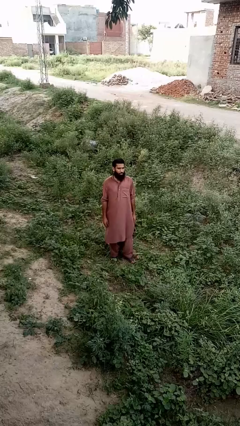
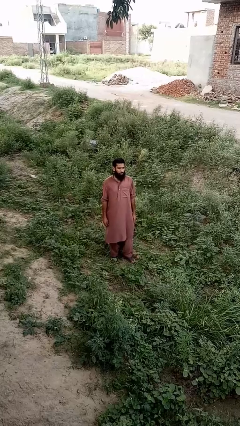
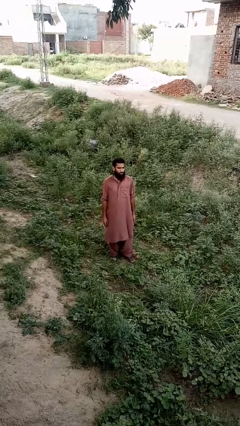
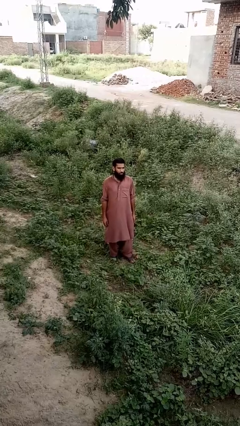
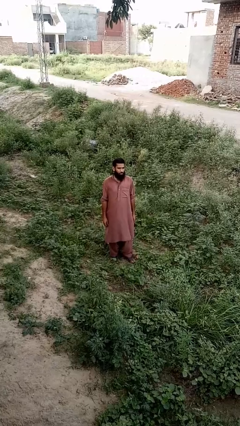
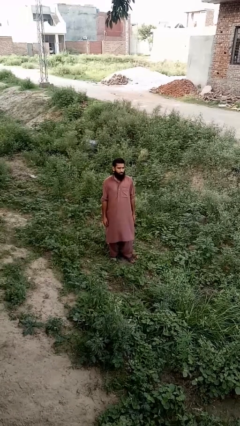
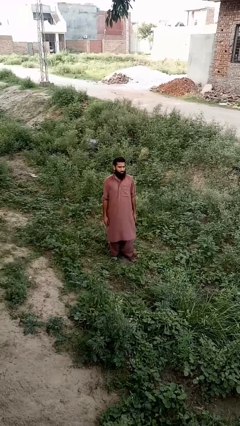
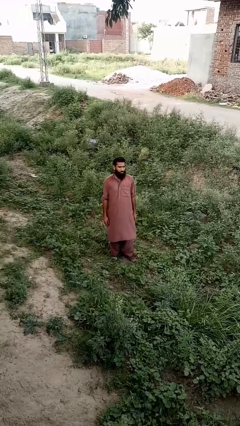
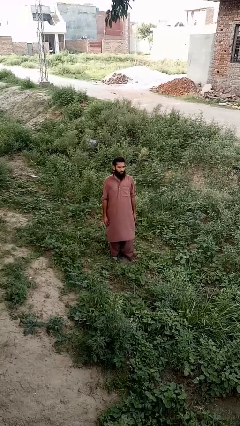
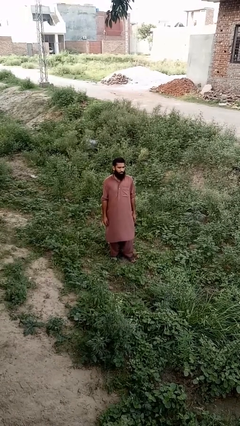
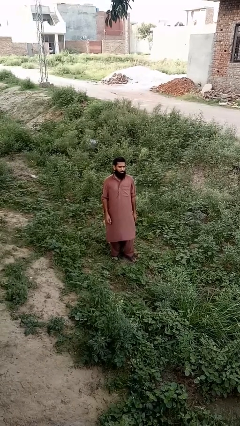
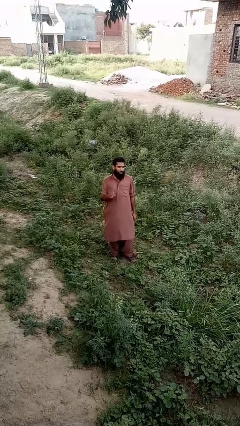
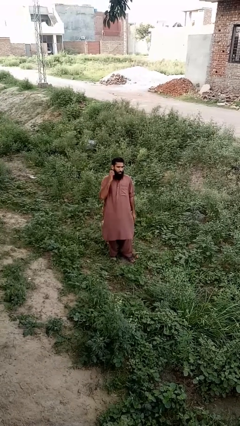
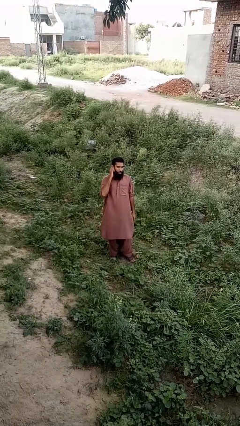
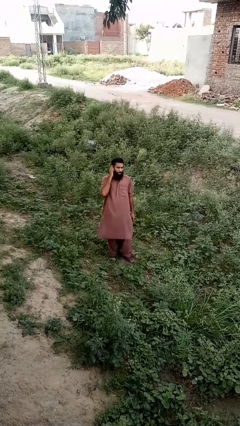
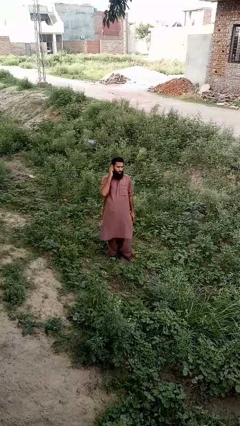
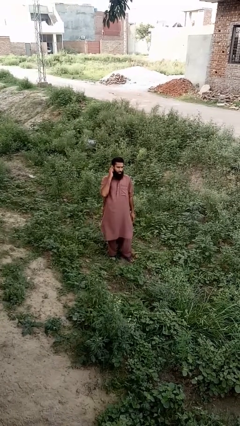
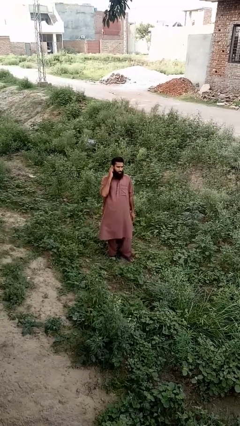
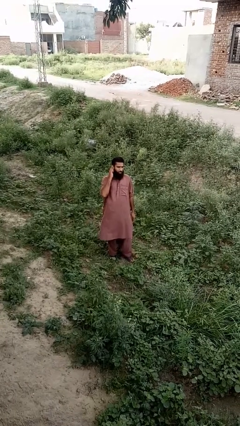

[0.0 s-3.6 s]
person touches earlobe

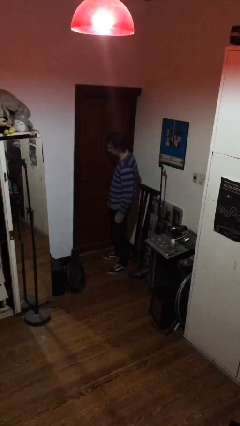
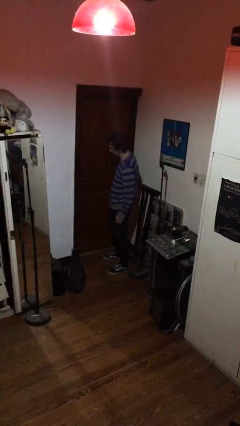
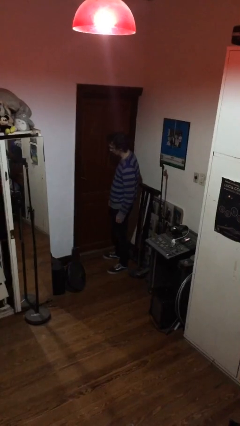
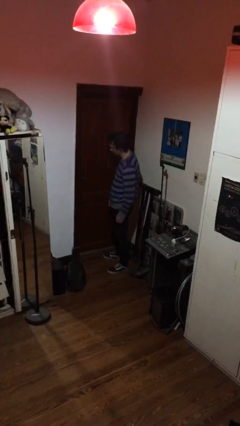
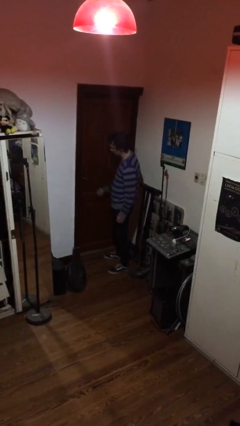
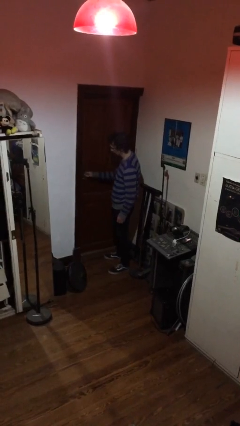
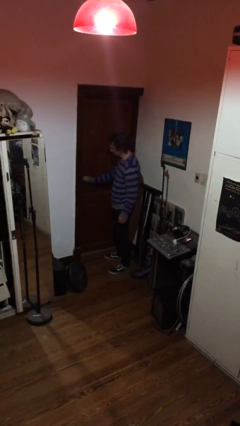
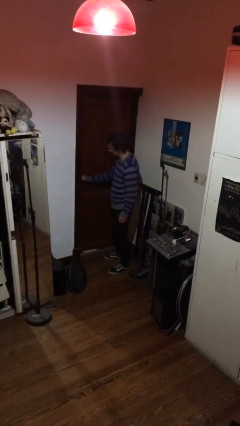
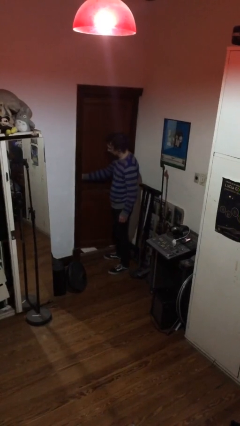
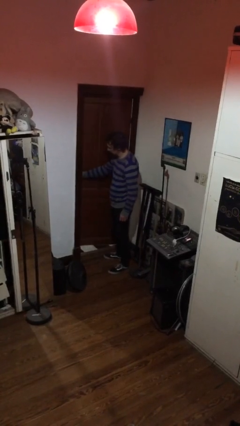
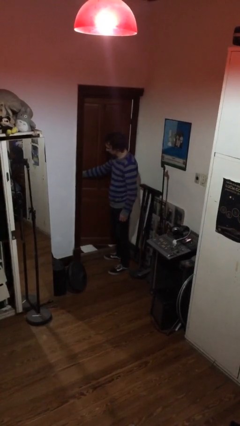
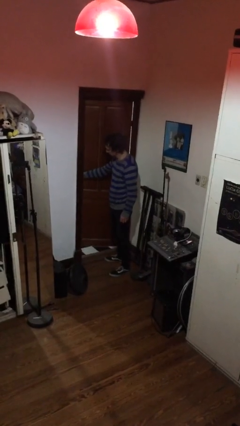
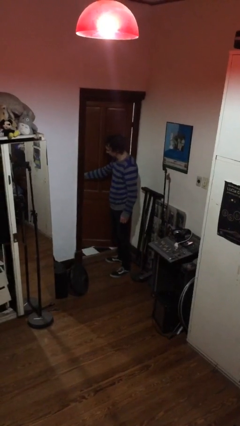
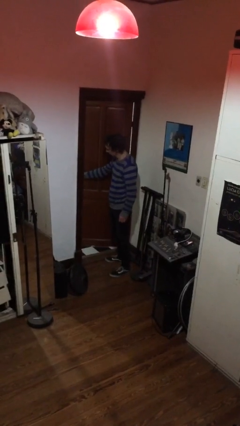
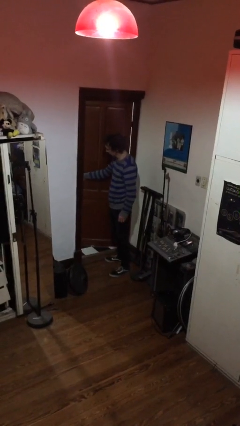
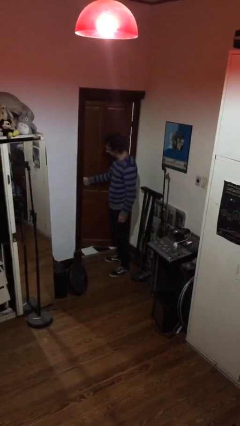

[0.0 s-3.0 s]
person opens facility door

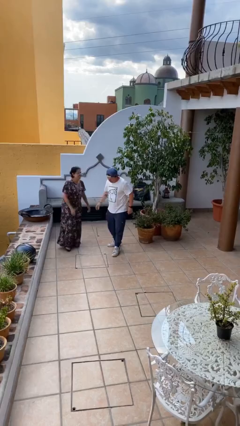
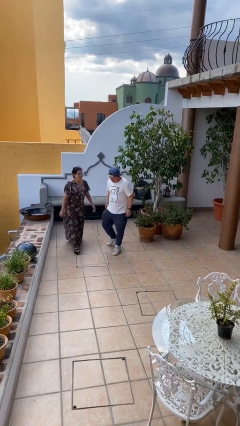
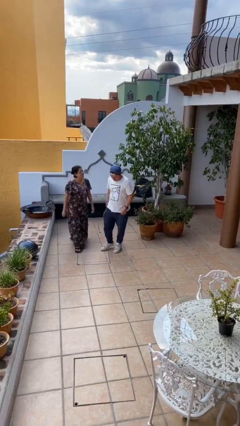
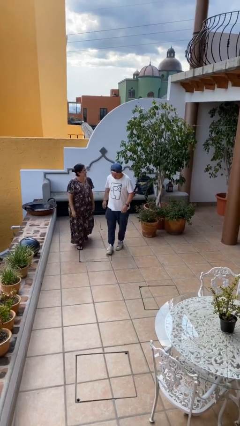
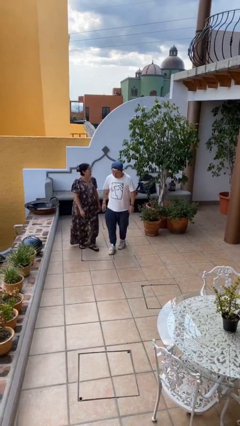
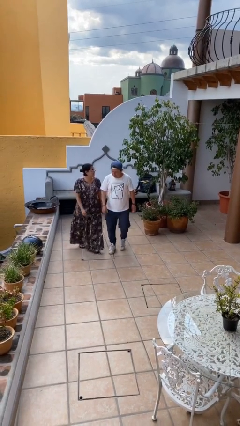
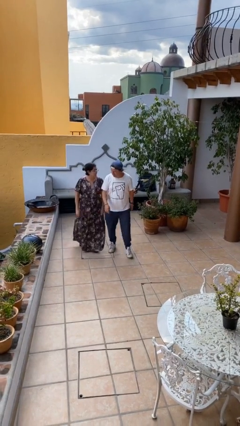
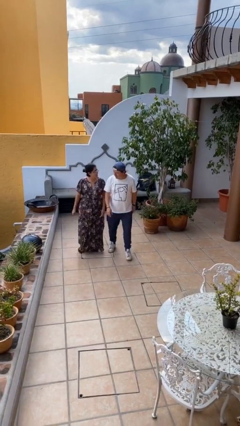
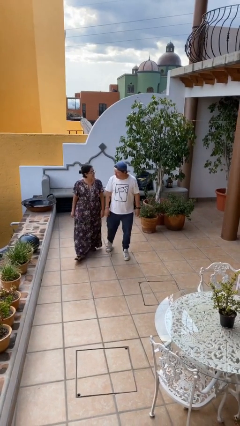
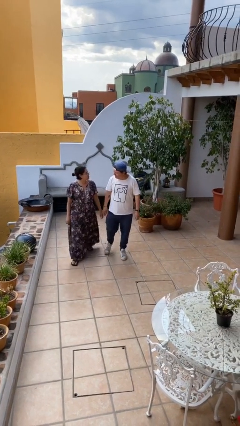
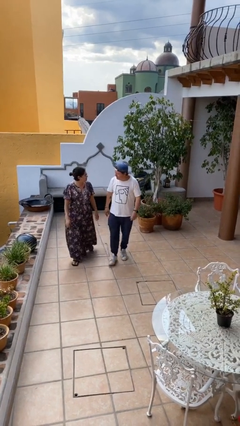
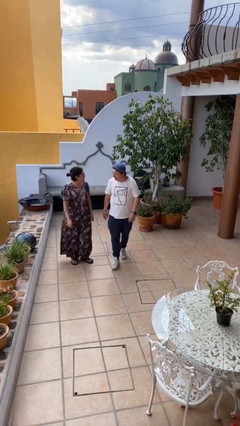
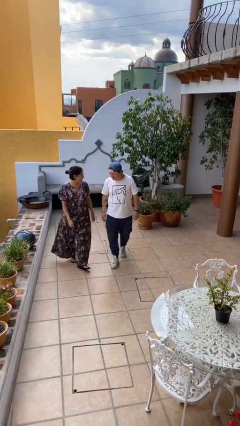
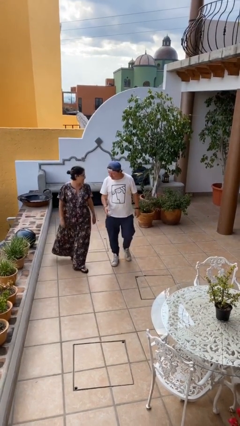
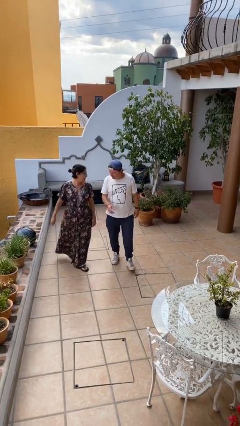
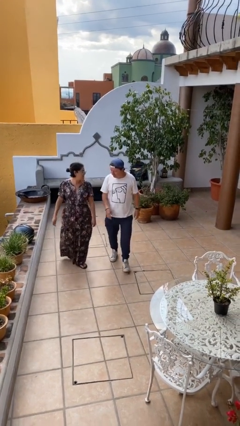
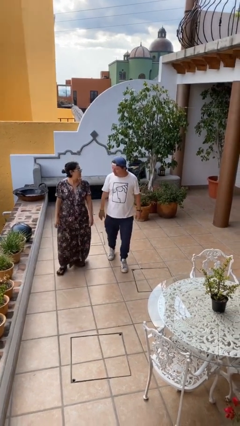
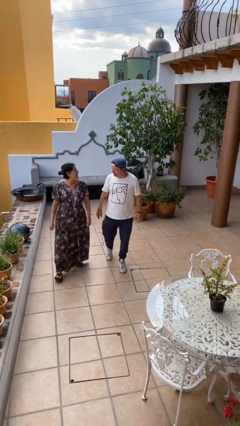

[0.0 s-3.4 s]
person talks to person

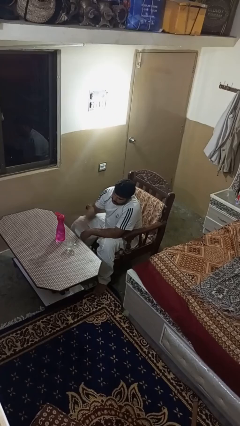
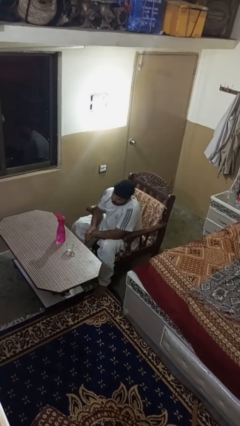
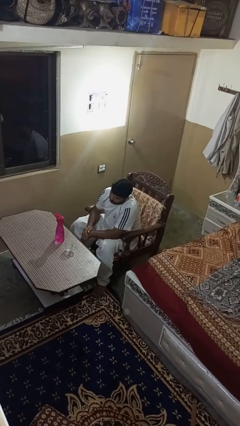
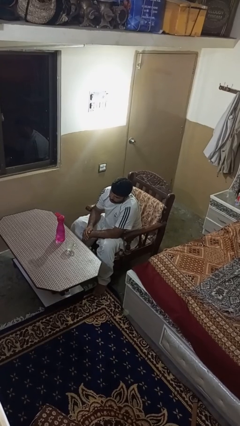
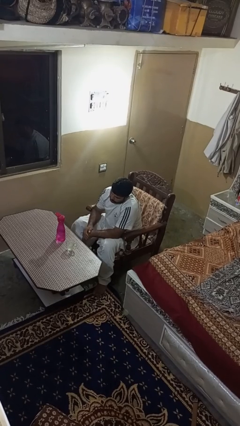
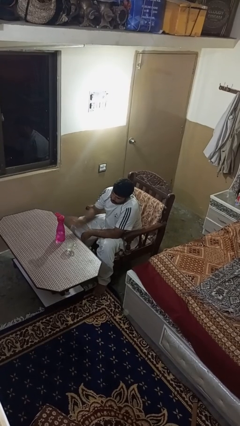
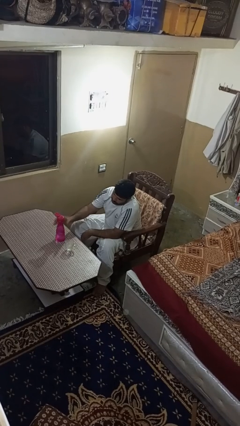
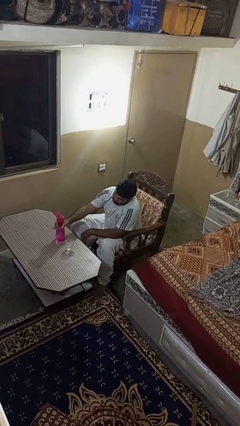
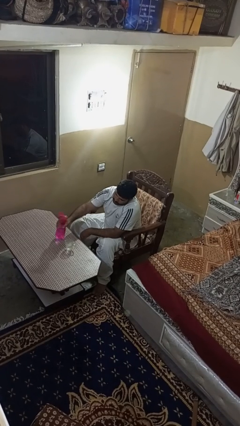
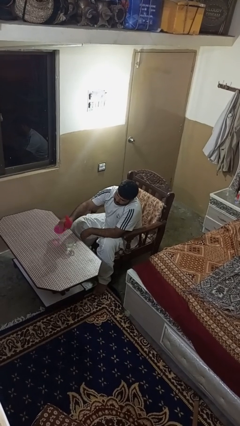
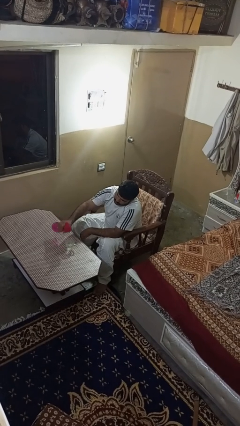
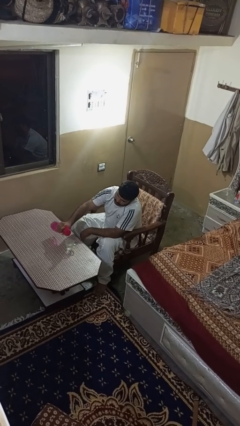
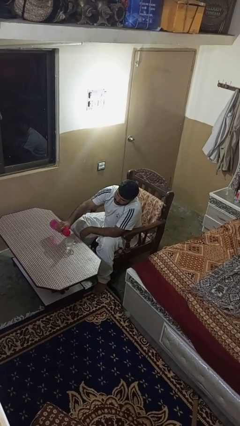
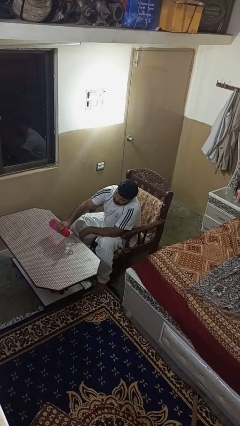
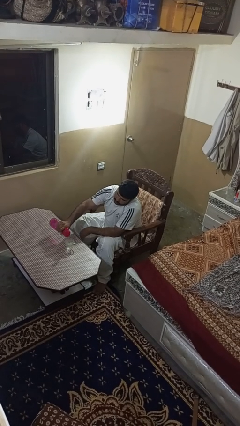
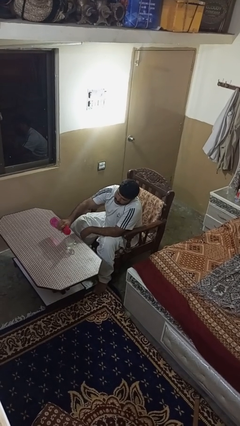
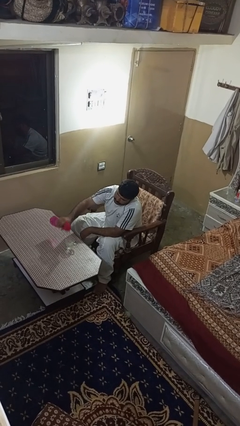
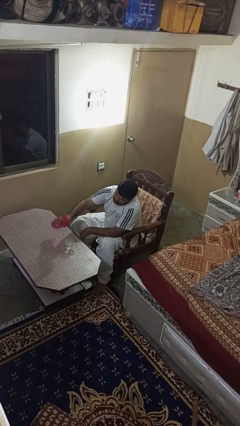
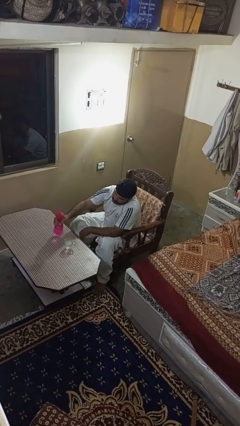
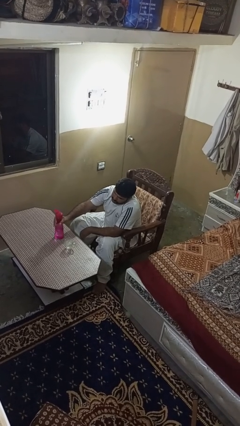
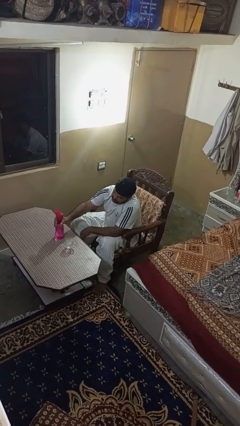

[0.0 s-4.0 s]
person pours liquid into cup

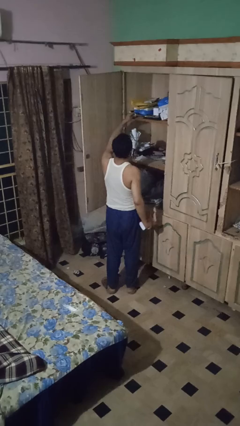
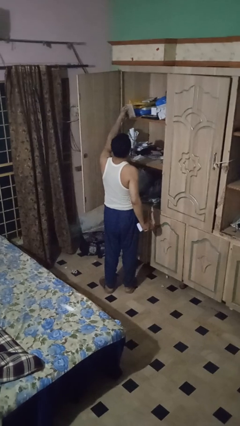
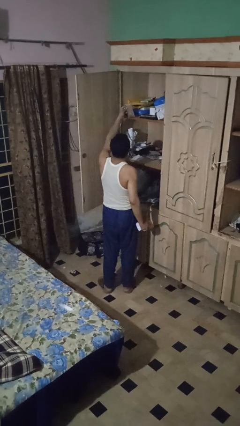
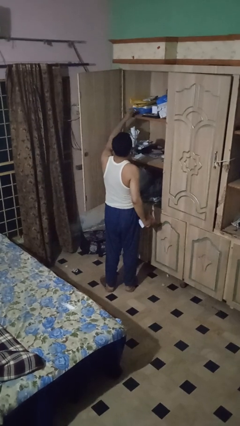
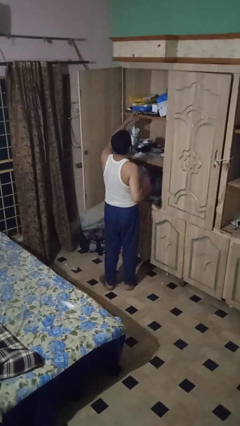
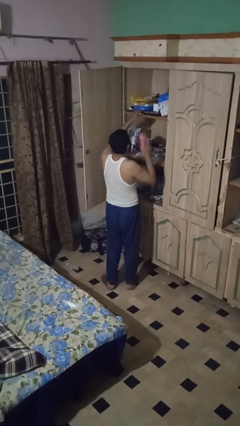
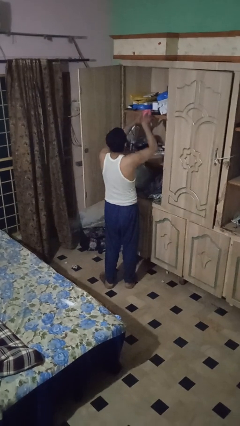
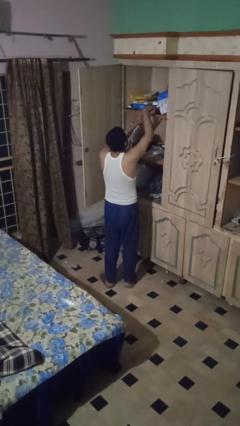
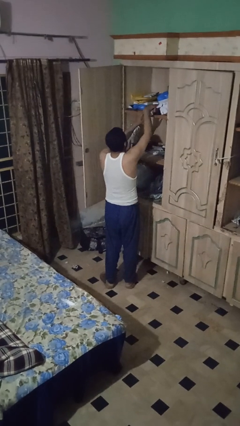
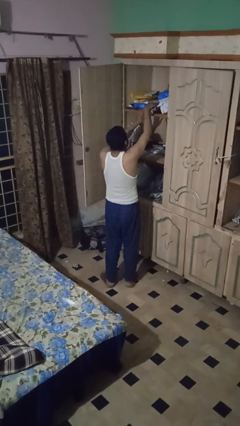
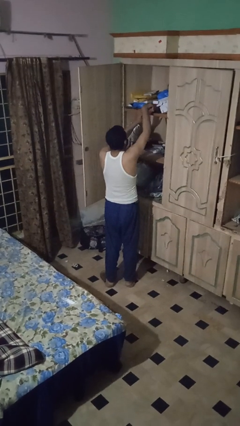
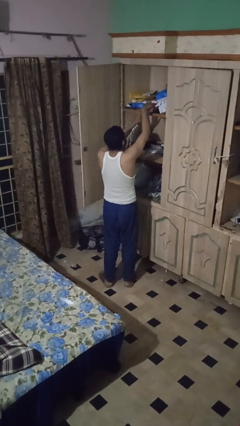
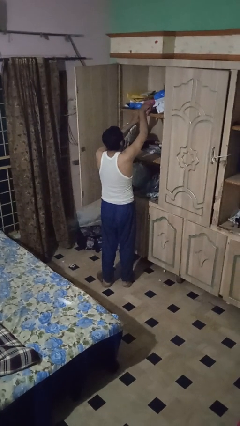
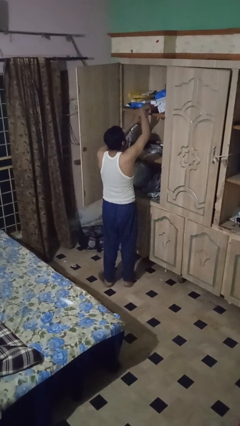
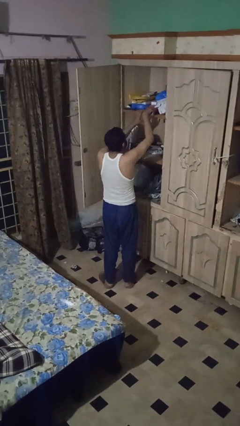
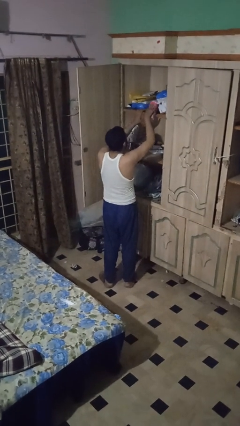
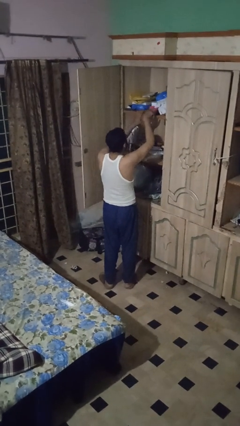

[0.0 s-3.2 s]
person dusts furniture

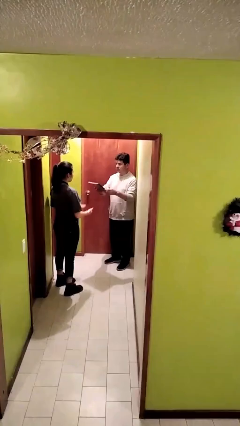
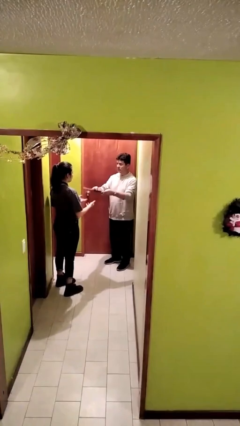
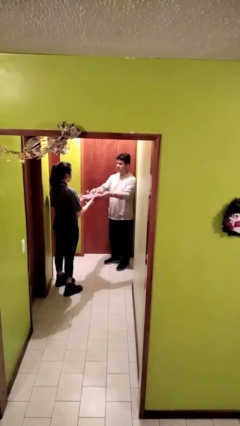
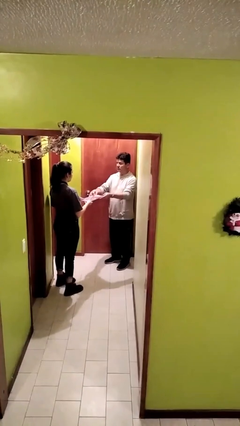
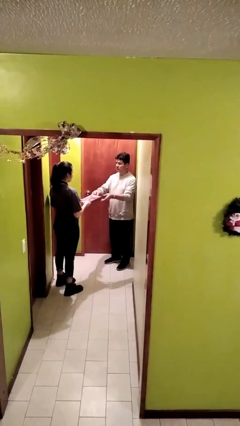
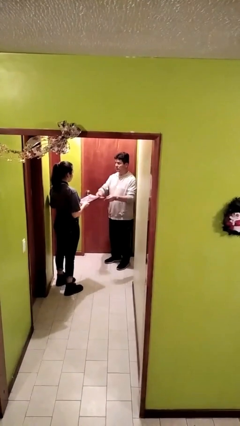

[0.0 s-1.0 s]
person transfers object to person
